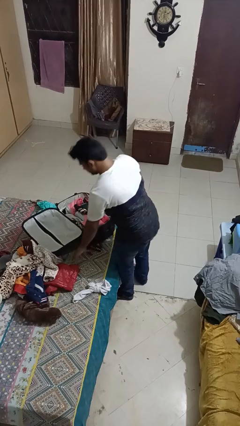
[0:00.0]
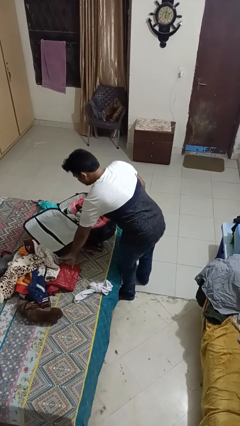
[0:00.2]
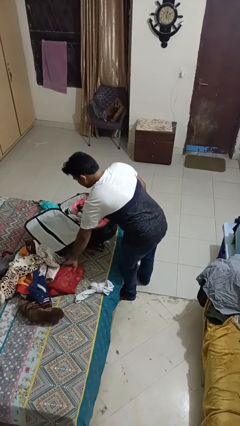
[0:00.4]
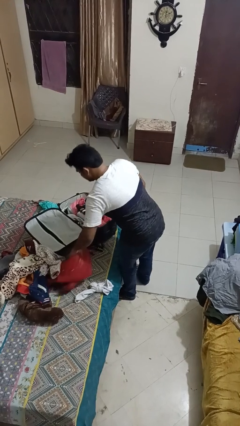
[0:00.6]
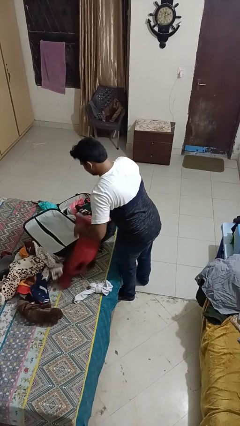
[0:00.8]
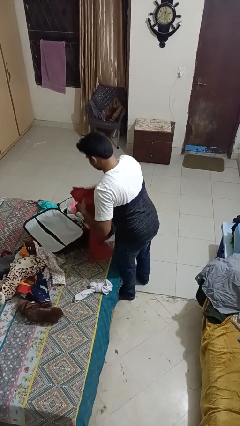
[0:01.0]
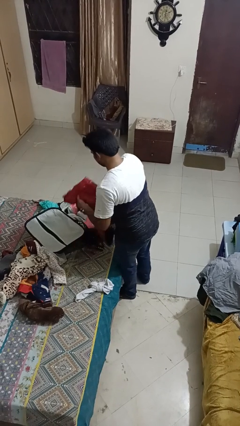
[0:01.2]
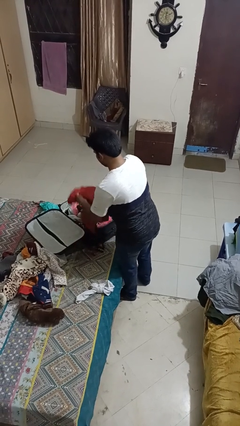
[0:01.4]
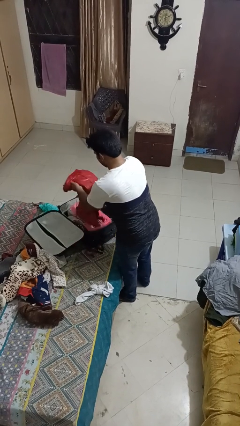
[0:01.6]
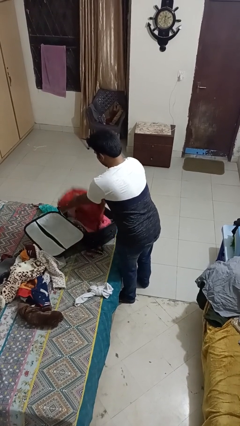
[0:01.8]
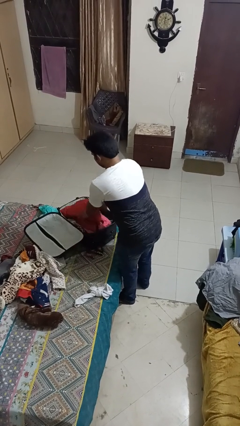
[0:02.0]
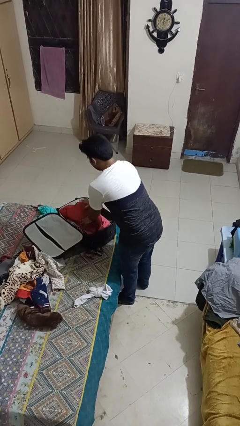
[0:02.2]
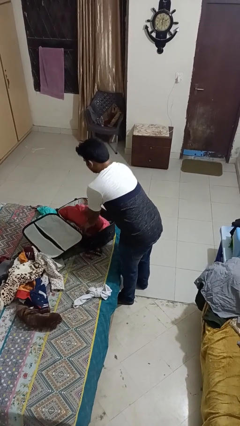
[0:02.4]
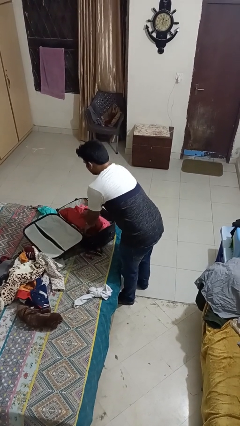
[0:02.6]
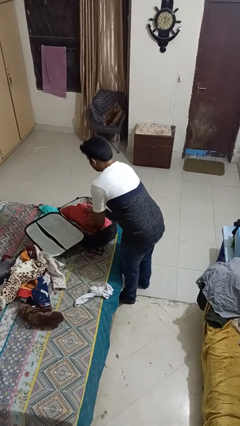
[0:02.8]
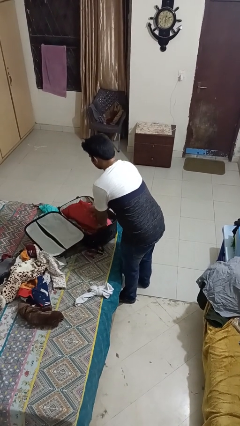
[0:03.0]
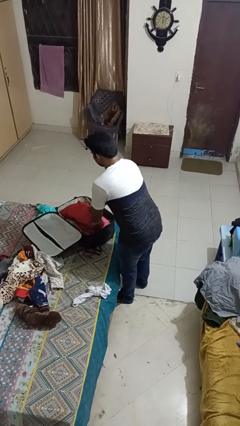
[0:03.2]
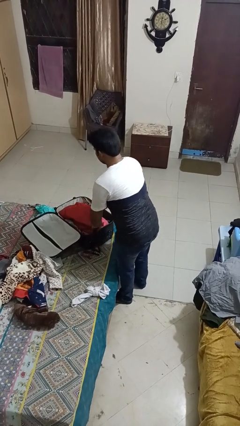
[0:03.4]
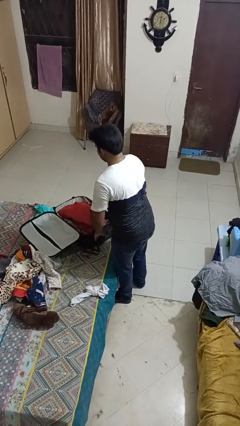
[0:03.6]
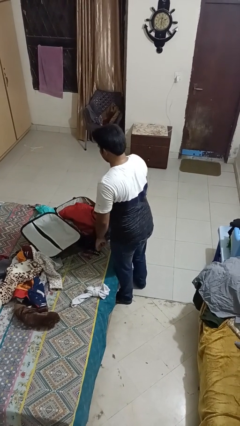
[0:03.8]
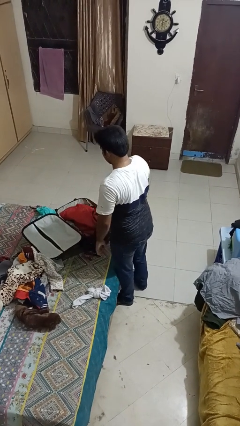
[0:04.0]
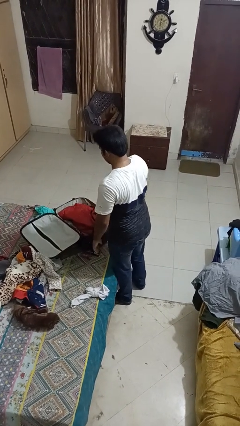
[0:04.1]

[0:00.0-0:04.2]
person loads clothes into suitcase

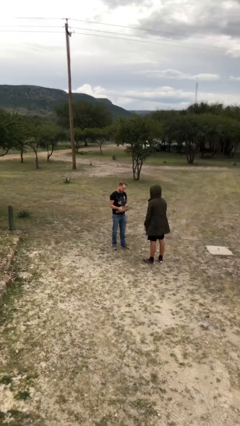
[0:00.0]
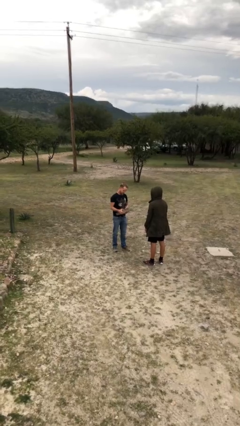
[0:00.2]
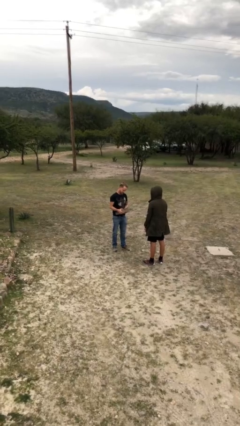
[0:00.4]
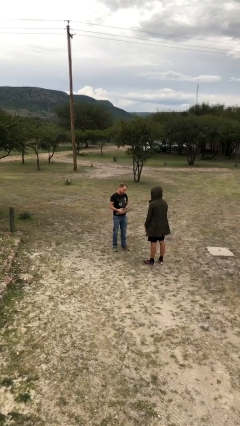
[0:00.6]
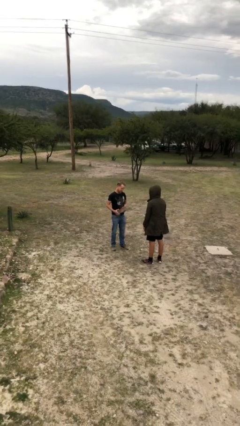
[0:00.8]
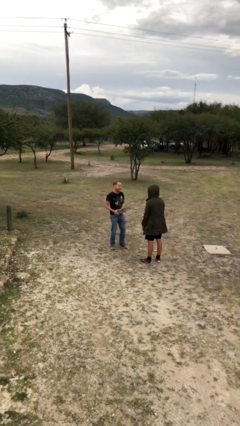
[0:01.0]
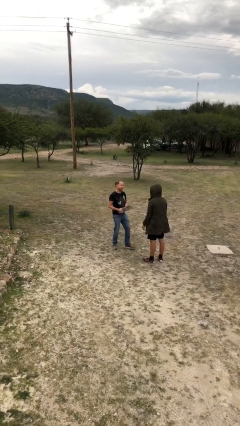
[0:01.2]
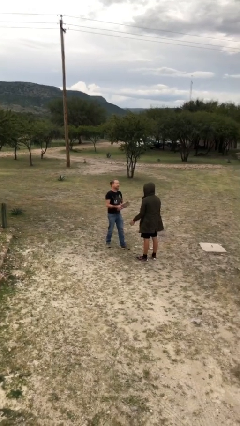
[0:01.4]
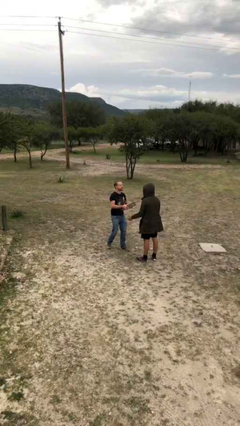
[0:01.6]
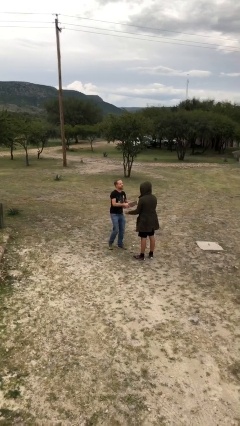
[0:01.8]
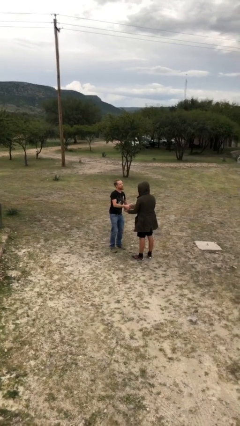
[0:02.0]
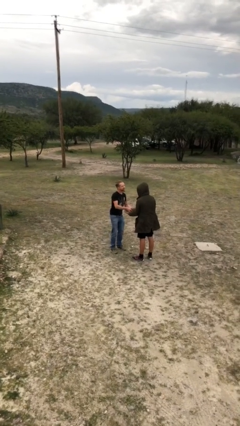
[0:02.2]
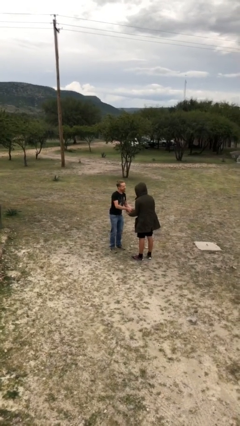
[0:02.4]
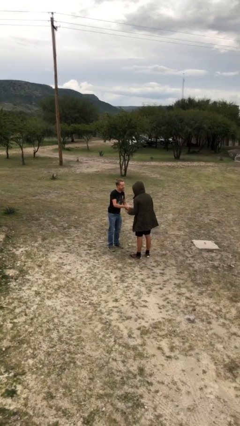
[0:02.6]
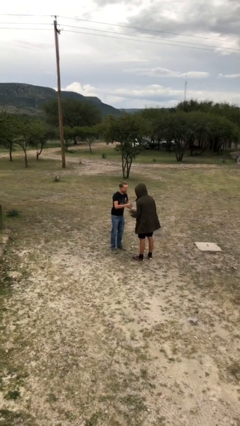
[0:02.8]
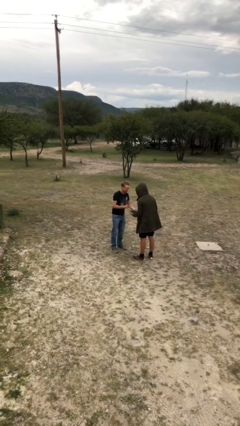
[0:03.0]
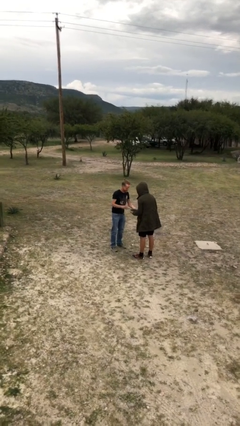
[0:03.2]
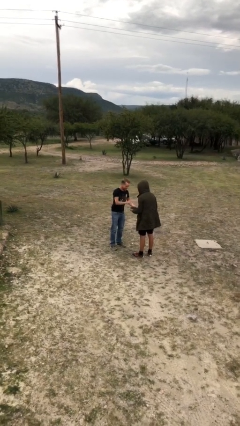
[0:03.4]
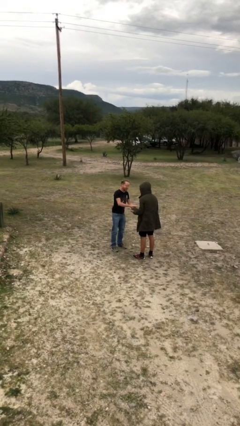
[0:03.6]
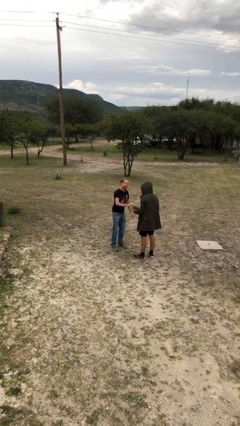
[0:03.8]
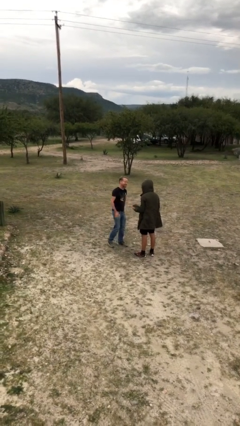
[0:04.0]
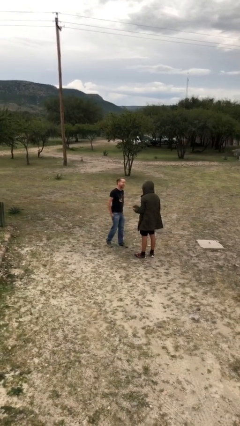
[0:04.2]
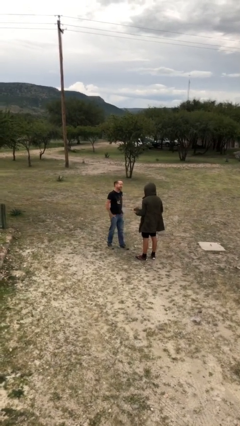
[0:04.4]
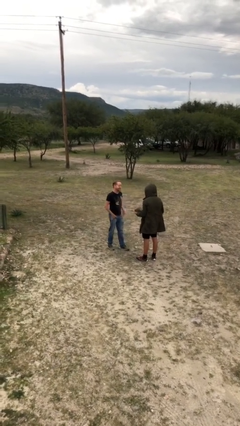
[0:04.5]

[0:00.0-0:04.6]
person transfers object to person

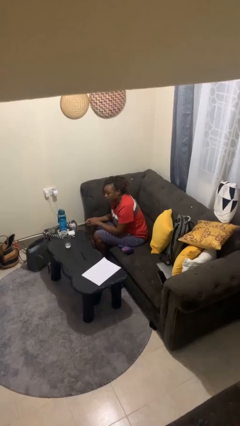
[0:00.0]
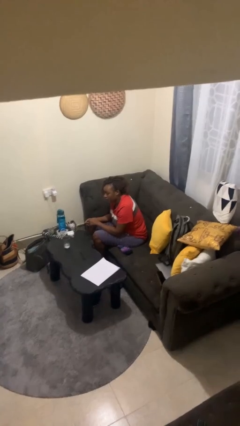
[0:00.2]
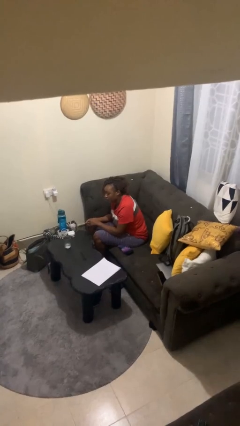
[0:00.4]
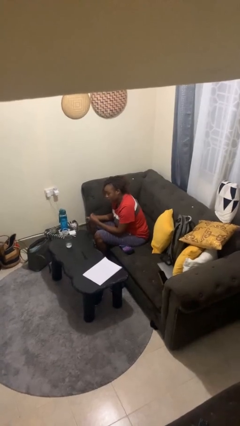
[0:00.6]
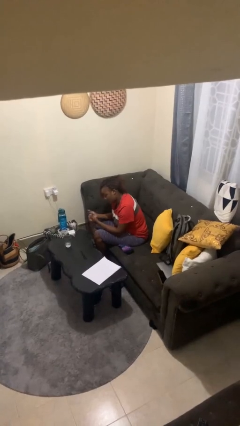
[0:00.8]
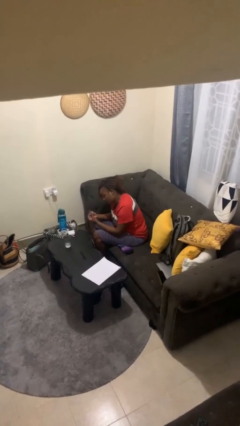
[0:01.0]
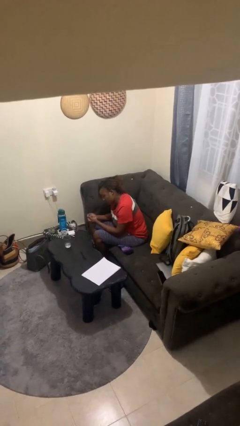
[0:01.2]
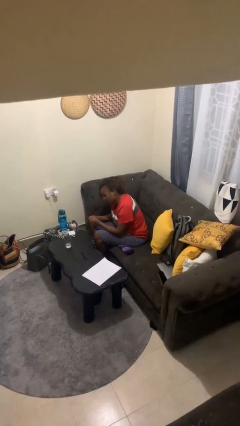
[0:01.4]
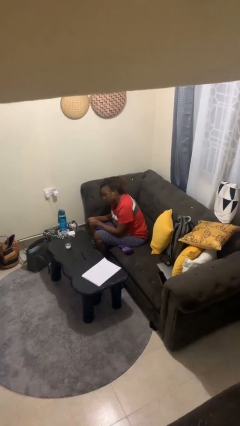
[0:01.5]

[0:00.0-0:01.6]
person snaps fingers

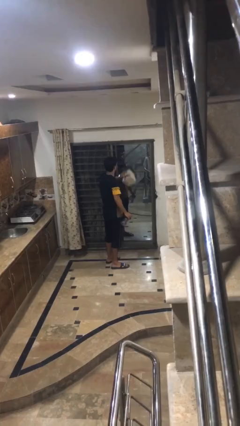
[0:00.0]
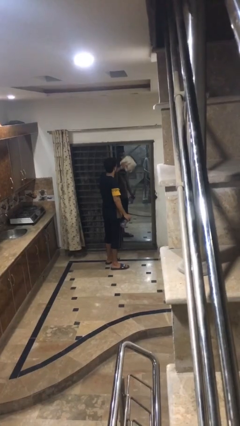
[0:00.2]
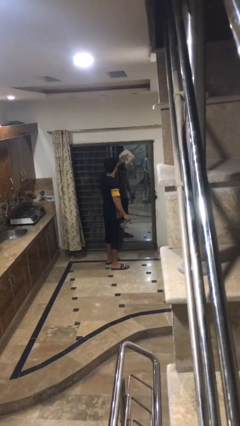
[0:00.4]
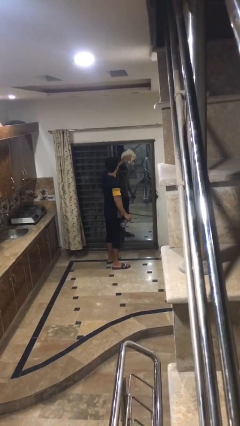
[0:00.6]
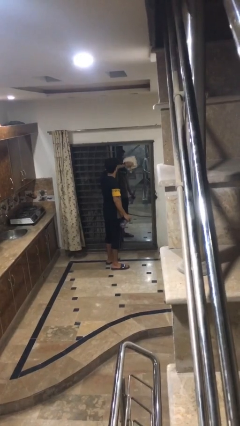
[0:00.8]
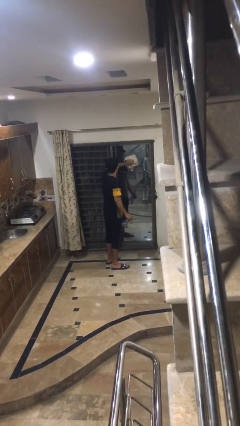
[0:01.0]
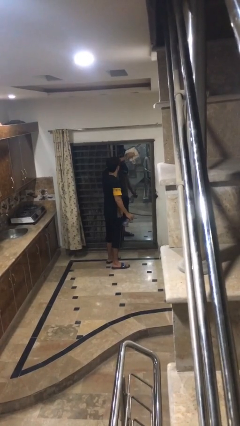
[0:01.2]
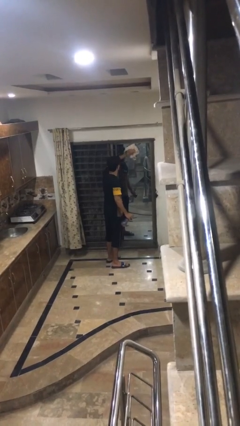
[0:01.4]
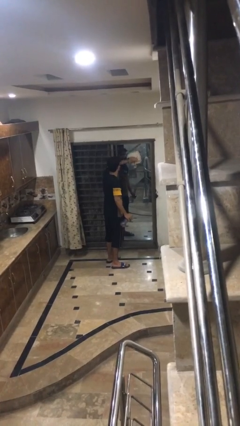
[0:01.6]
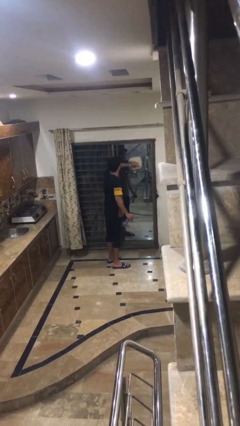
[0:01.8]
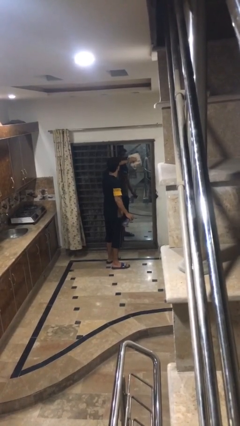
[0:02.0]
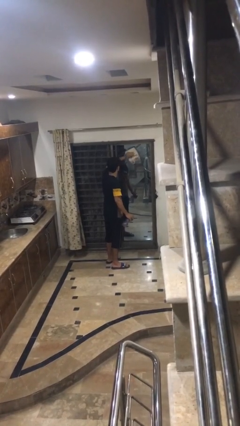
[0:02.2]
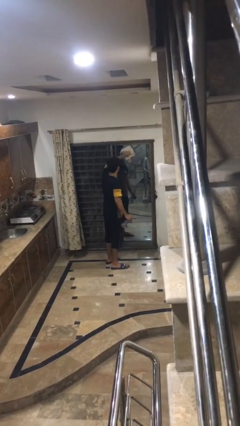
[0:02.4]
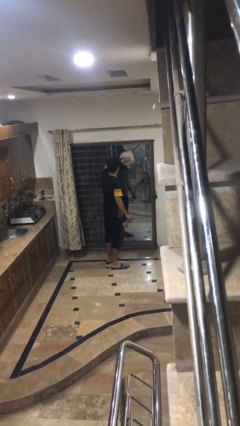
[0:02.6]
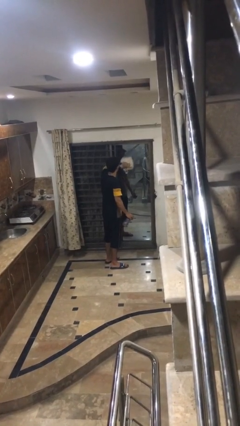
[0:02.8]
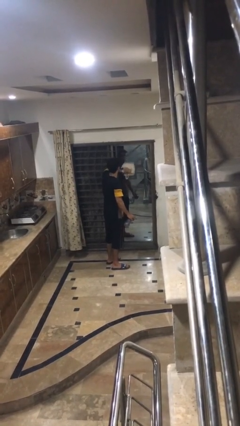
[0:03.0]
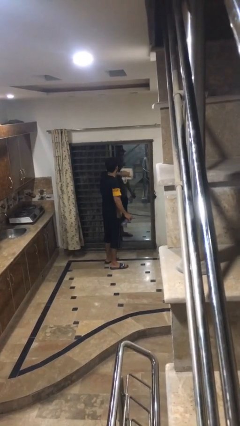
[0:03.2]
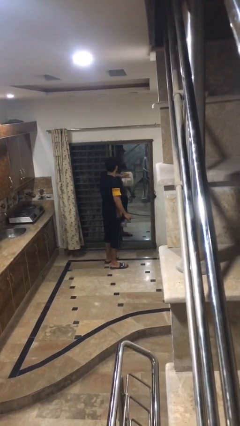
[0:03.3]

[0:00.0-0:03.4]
person washes window

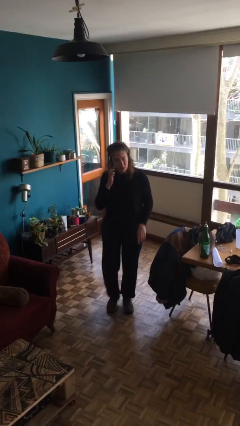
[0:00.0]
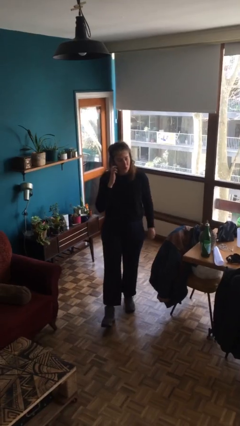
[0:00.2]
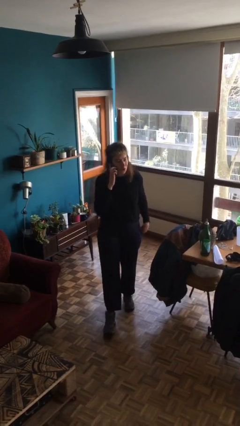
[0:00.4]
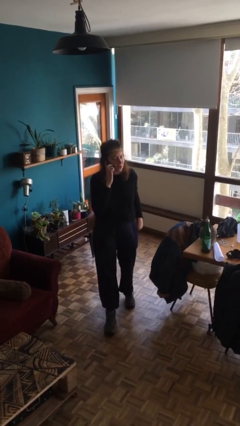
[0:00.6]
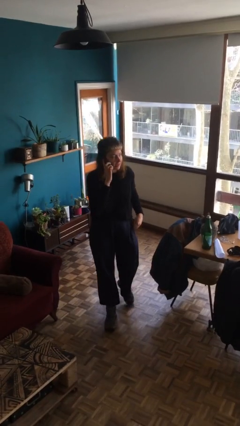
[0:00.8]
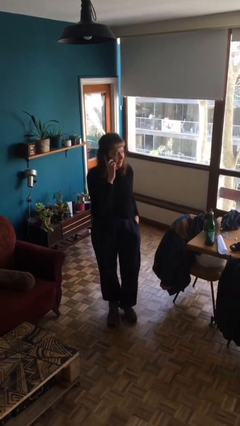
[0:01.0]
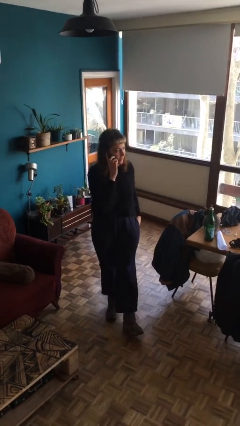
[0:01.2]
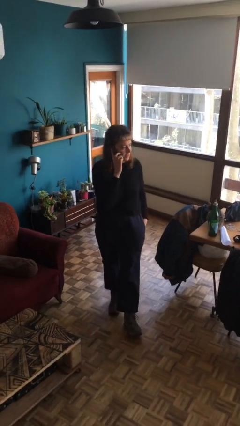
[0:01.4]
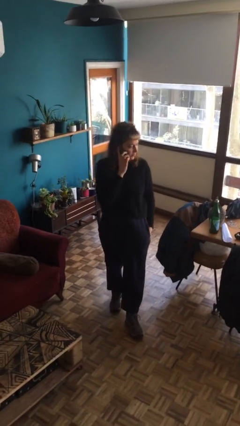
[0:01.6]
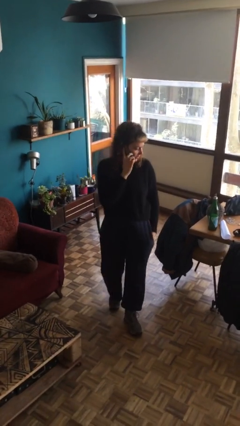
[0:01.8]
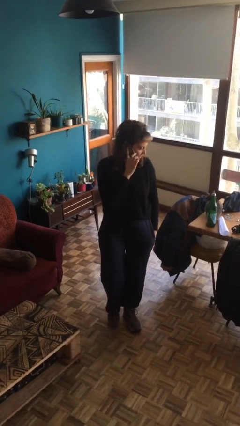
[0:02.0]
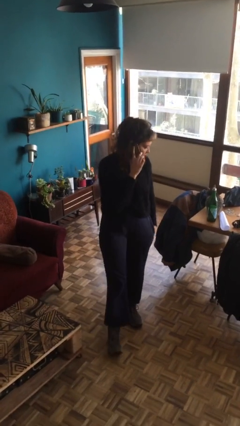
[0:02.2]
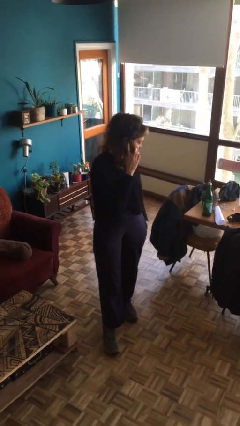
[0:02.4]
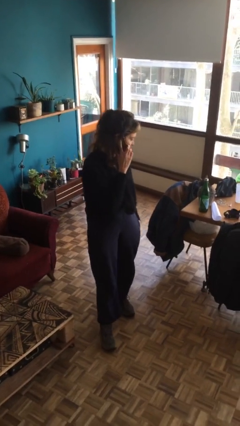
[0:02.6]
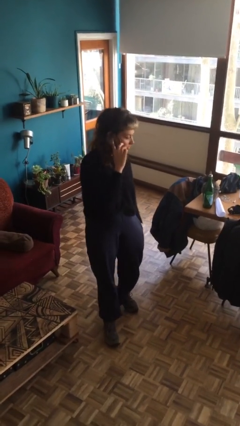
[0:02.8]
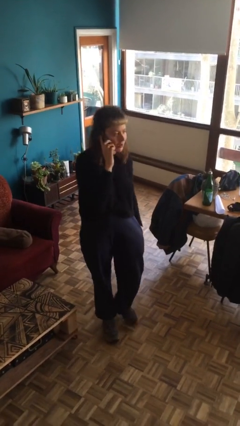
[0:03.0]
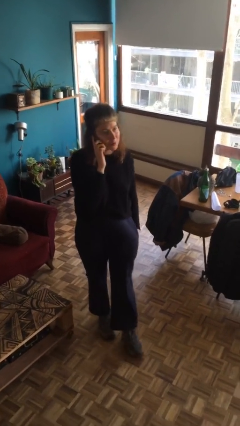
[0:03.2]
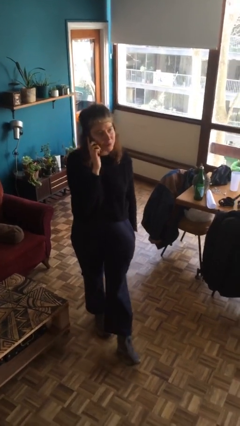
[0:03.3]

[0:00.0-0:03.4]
person talks on phone
